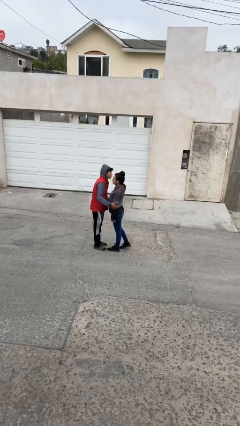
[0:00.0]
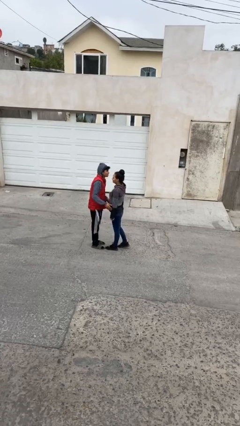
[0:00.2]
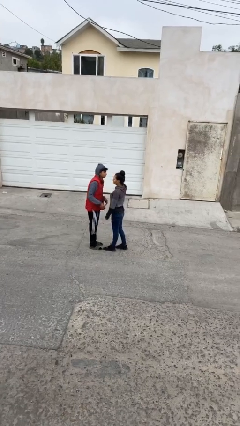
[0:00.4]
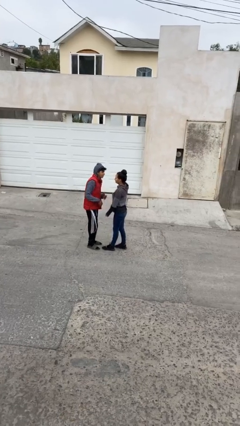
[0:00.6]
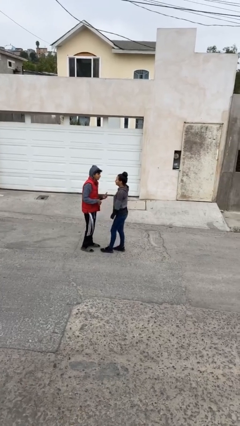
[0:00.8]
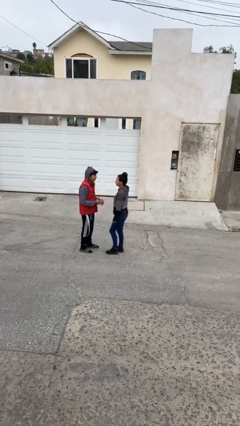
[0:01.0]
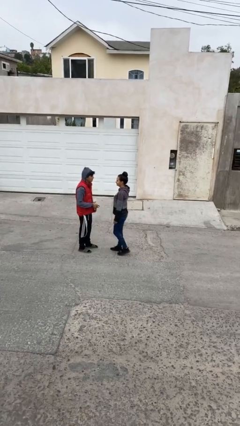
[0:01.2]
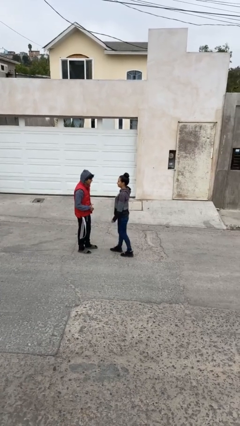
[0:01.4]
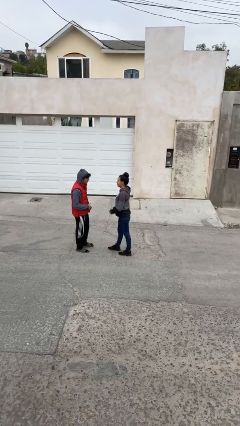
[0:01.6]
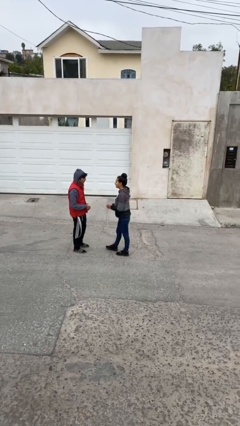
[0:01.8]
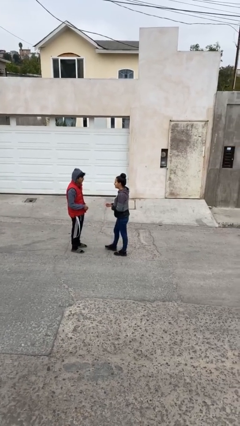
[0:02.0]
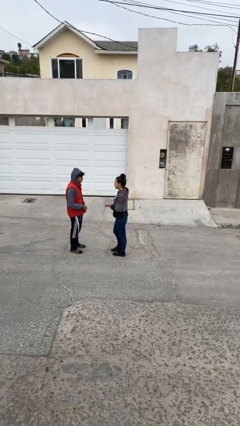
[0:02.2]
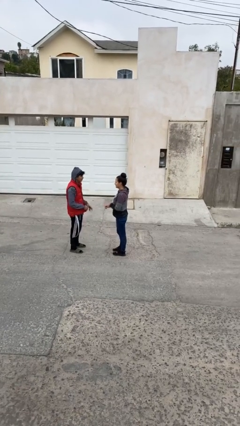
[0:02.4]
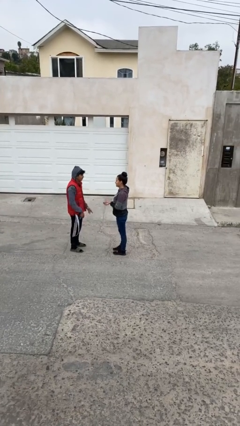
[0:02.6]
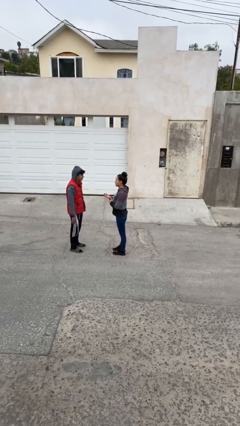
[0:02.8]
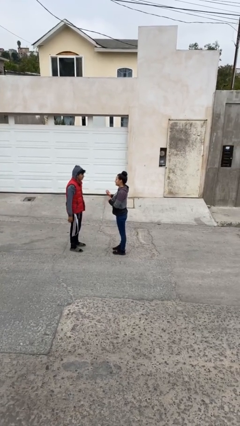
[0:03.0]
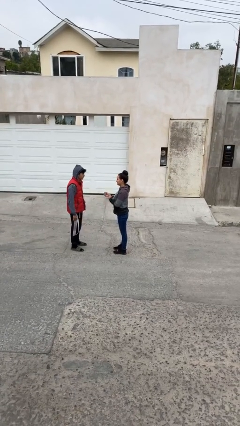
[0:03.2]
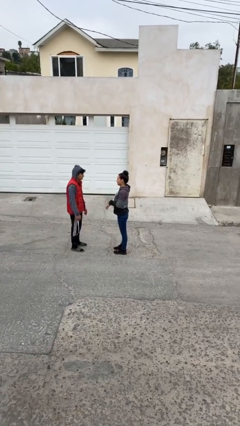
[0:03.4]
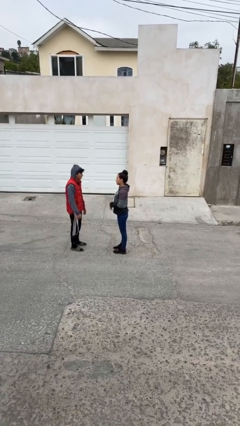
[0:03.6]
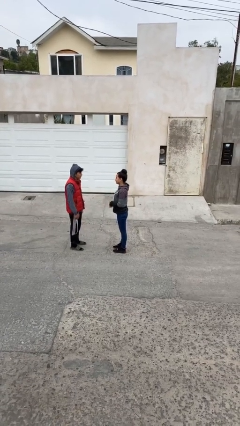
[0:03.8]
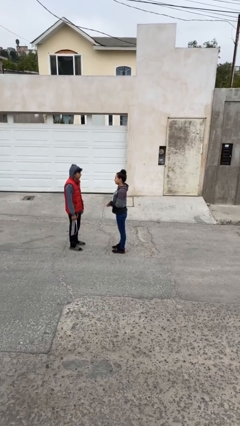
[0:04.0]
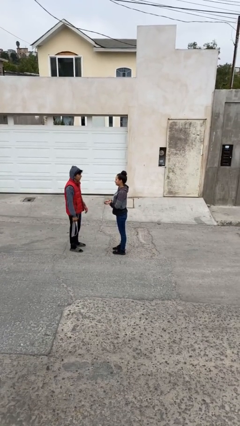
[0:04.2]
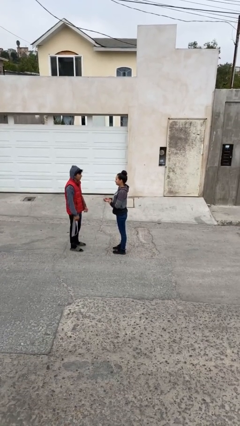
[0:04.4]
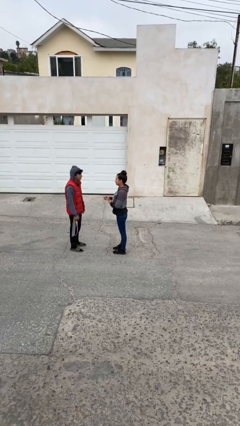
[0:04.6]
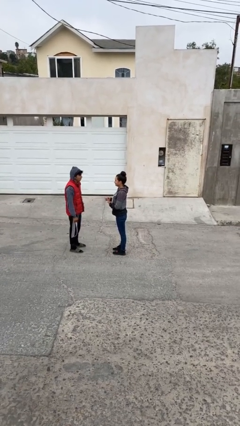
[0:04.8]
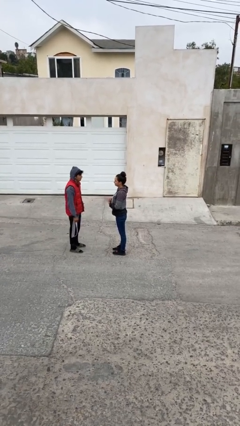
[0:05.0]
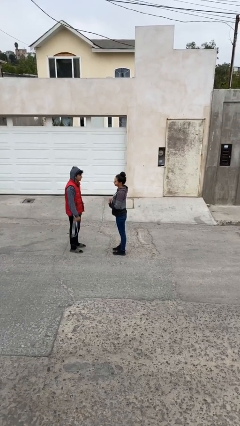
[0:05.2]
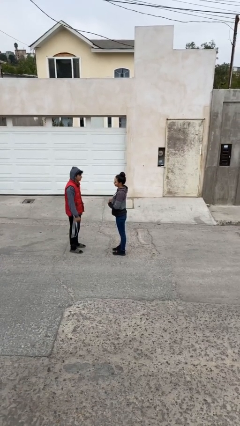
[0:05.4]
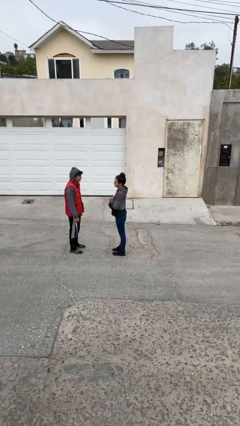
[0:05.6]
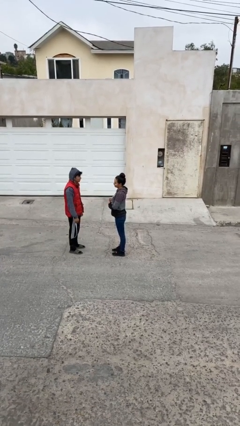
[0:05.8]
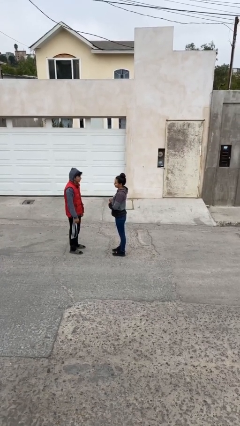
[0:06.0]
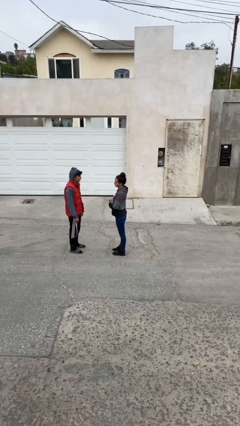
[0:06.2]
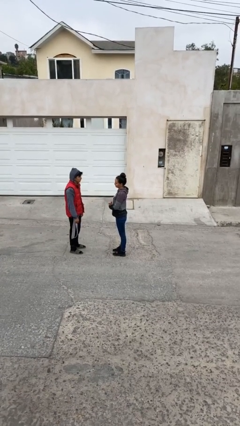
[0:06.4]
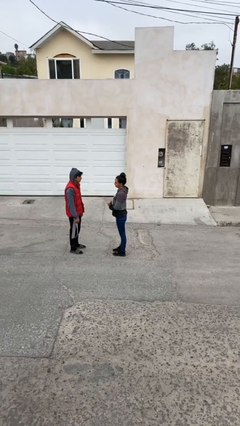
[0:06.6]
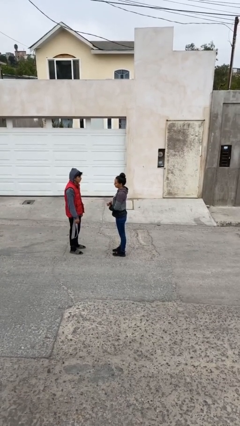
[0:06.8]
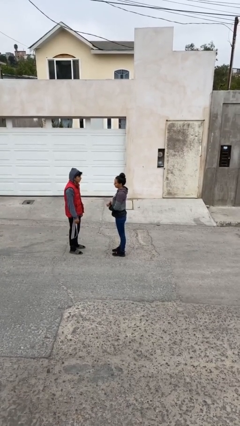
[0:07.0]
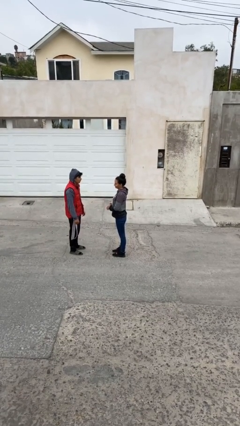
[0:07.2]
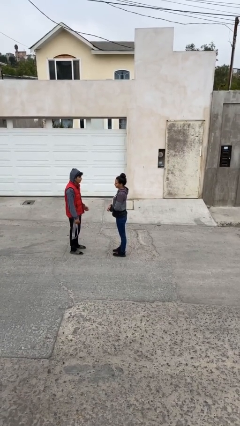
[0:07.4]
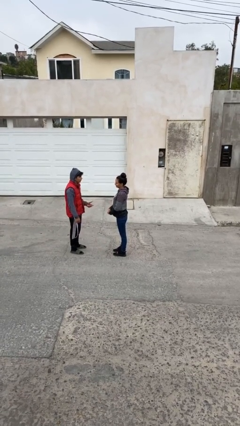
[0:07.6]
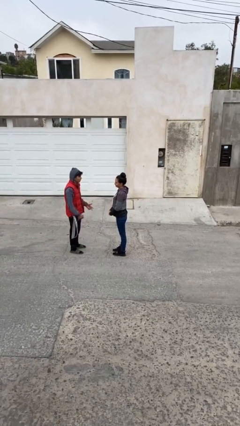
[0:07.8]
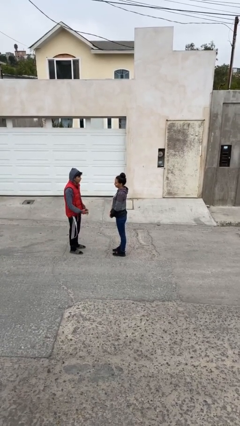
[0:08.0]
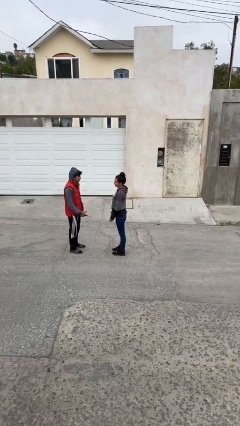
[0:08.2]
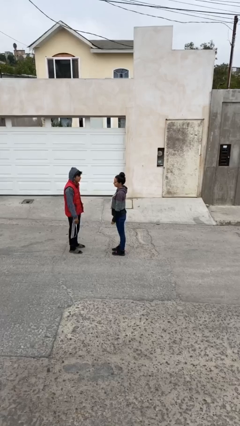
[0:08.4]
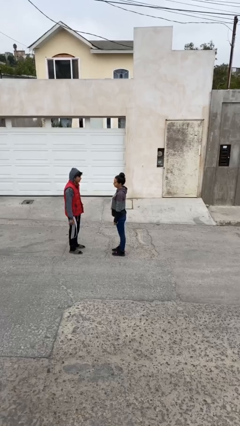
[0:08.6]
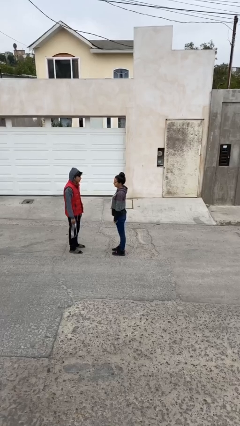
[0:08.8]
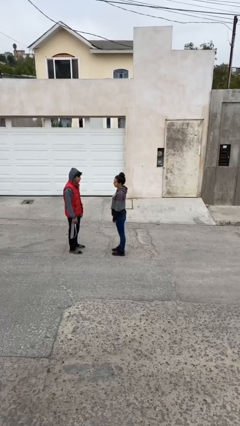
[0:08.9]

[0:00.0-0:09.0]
person talks to person

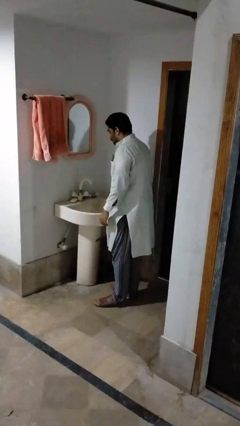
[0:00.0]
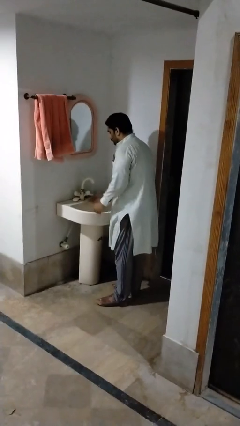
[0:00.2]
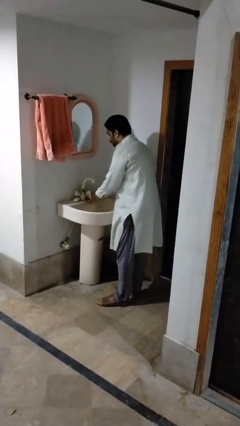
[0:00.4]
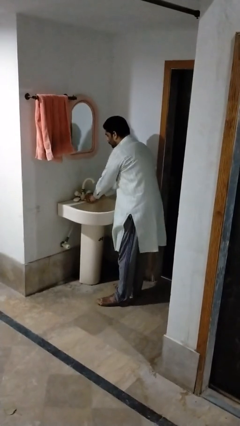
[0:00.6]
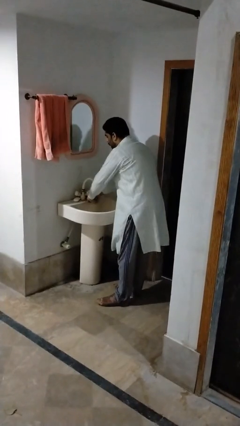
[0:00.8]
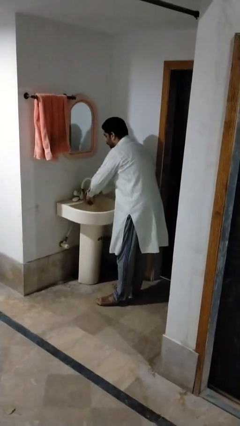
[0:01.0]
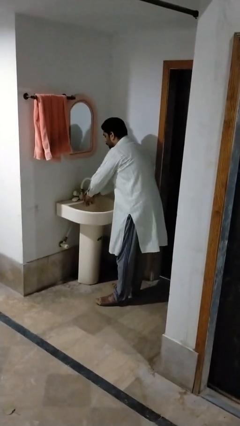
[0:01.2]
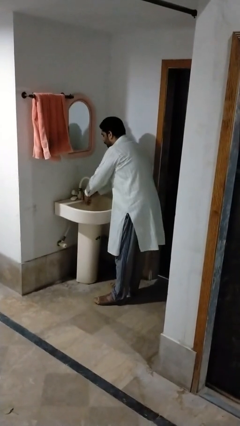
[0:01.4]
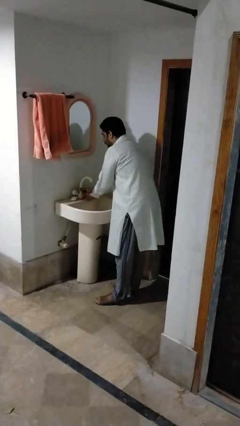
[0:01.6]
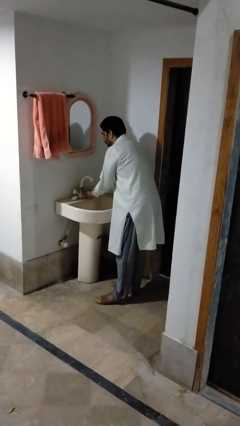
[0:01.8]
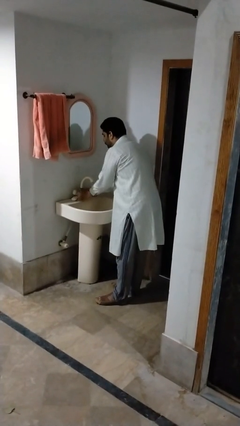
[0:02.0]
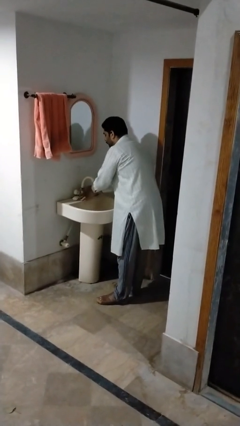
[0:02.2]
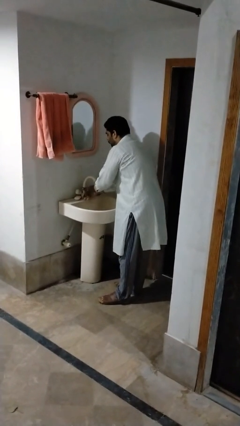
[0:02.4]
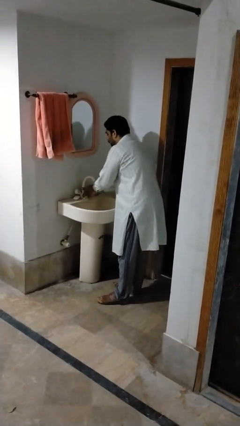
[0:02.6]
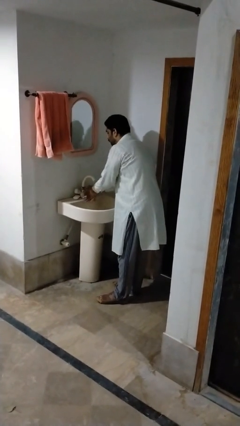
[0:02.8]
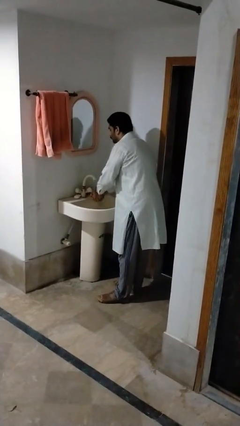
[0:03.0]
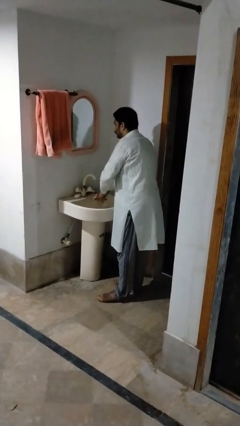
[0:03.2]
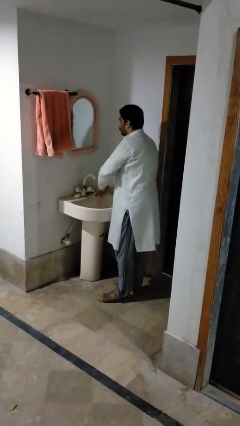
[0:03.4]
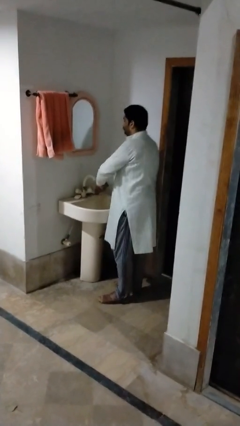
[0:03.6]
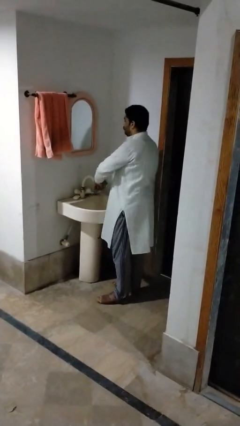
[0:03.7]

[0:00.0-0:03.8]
person washes hands

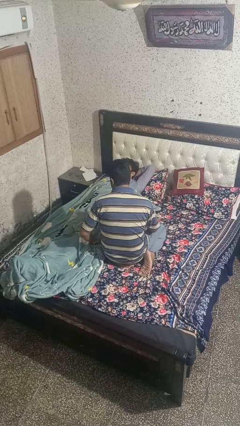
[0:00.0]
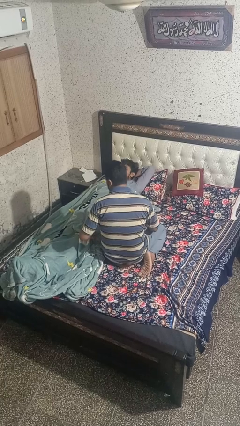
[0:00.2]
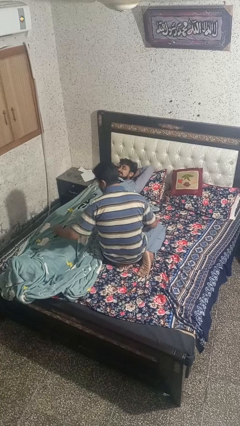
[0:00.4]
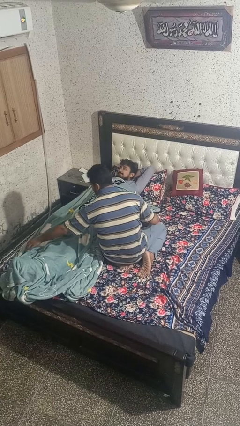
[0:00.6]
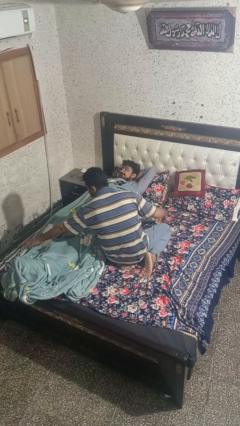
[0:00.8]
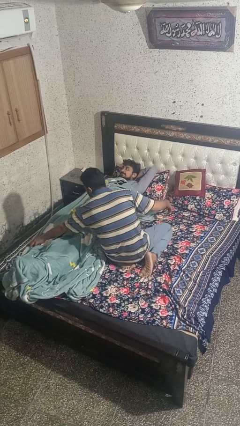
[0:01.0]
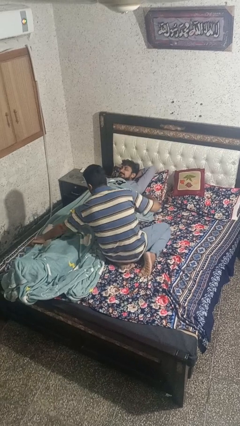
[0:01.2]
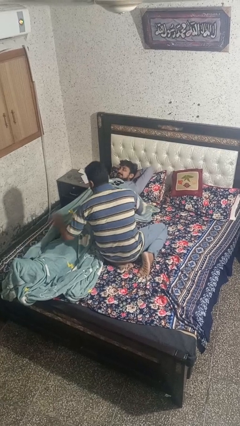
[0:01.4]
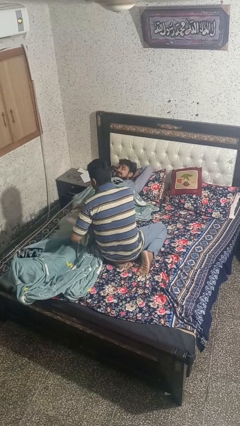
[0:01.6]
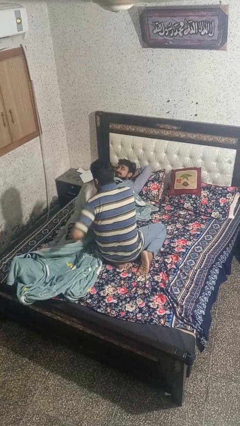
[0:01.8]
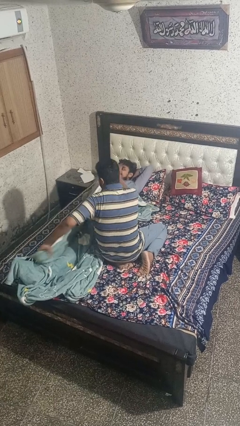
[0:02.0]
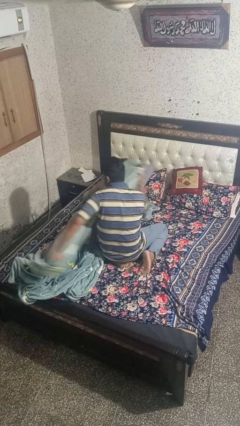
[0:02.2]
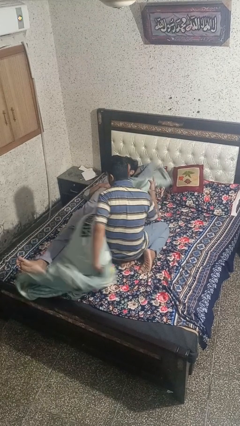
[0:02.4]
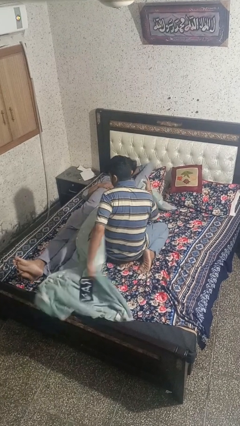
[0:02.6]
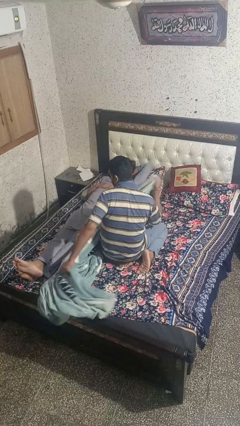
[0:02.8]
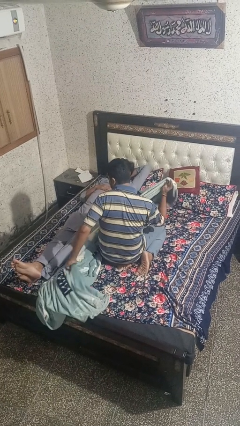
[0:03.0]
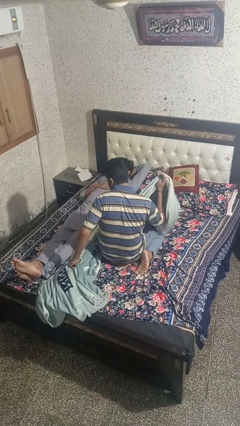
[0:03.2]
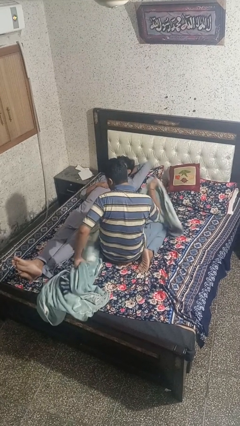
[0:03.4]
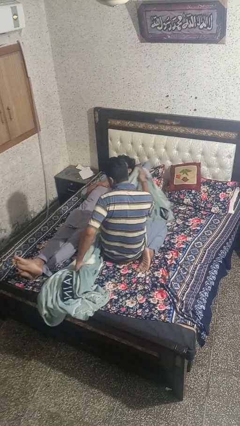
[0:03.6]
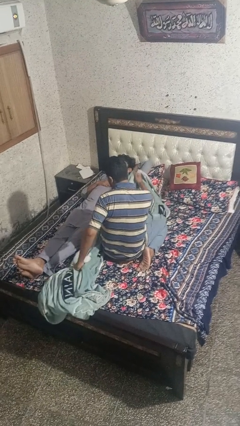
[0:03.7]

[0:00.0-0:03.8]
person uncovers friend with blanket

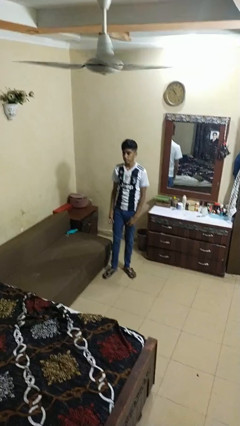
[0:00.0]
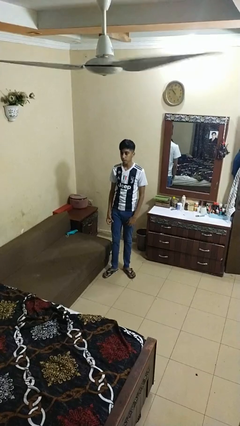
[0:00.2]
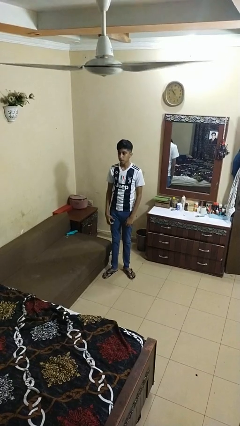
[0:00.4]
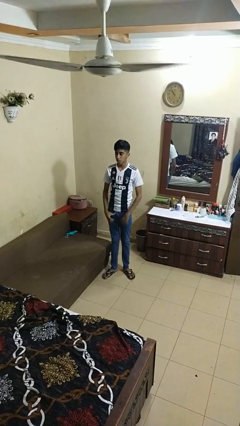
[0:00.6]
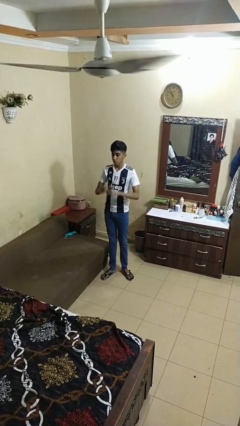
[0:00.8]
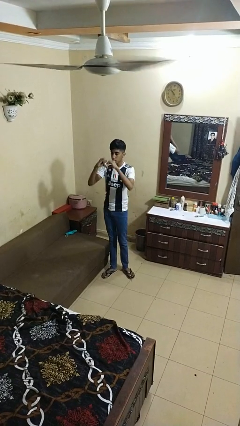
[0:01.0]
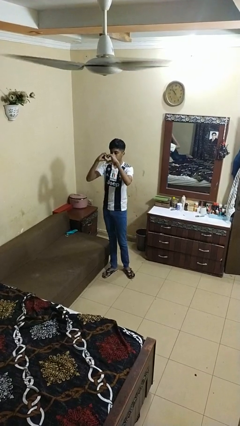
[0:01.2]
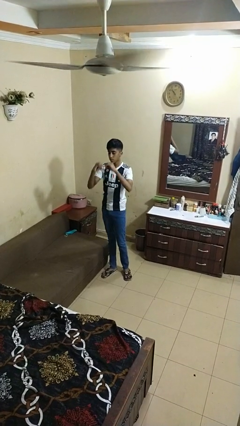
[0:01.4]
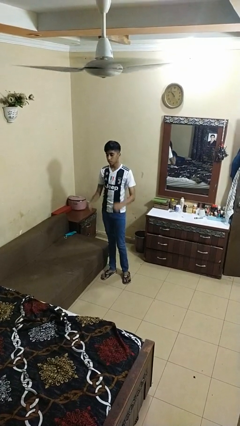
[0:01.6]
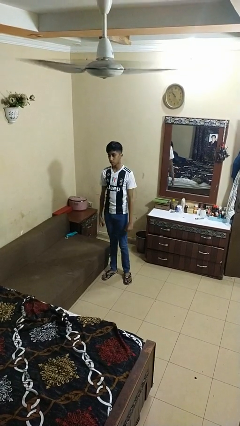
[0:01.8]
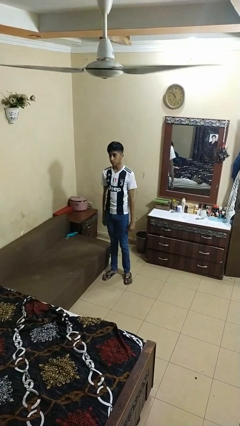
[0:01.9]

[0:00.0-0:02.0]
person gestures heart
